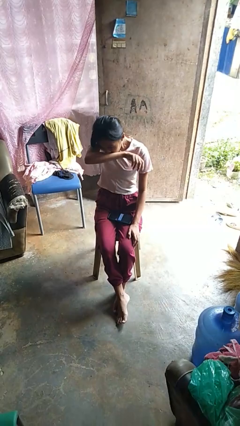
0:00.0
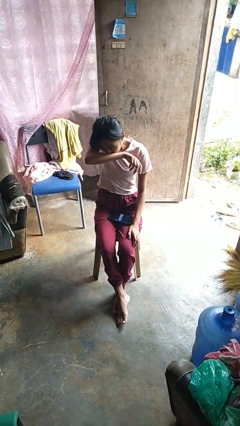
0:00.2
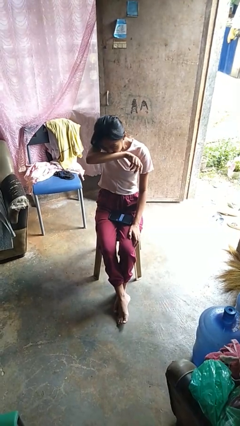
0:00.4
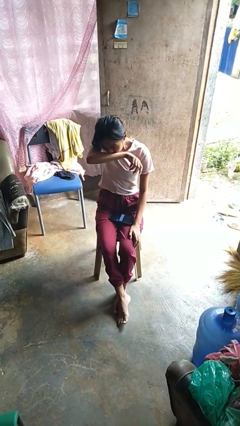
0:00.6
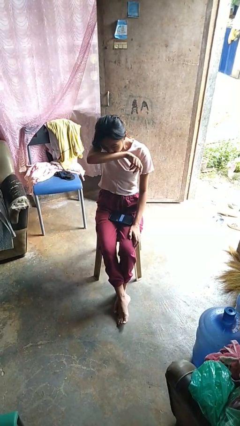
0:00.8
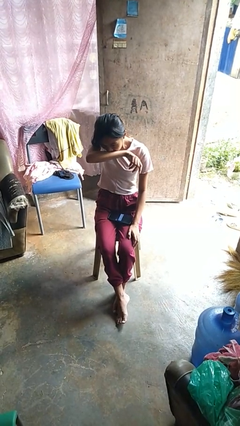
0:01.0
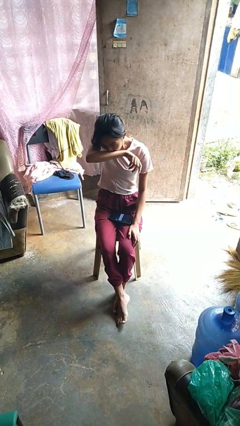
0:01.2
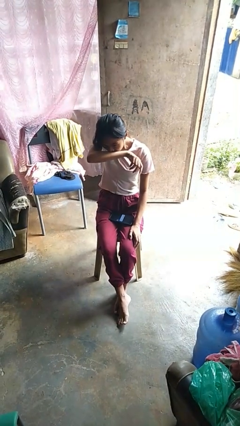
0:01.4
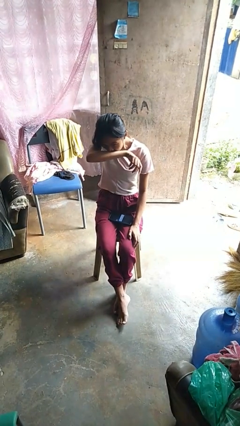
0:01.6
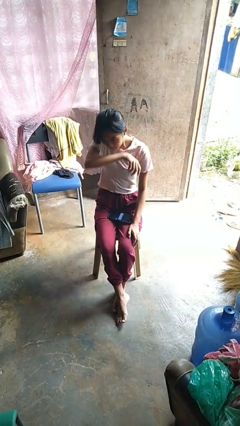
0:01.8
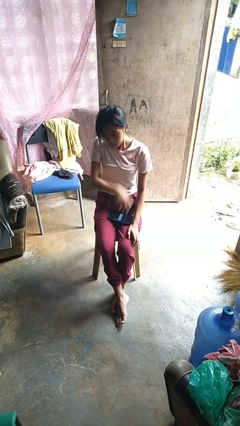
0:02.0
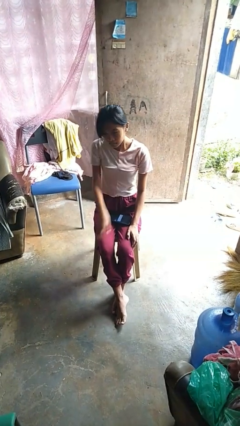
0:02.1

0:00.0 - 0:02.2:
person sneezes into arm

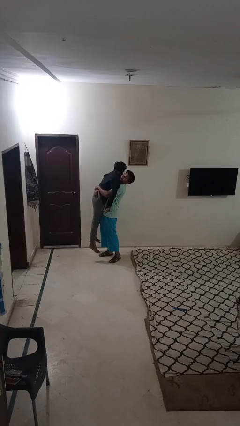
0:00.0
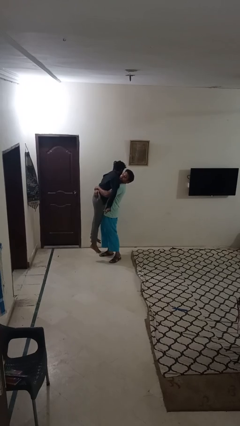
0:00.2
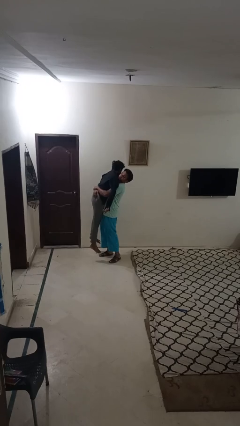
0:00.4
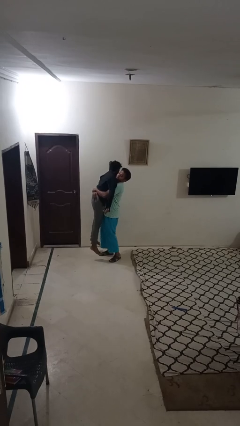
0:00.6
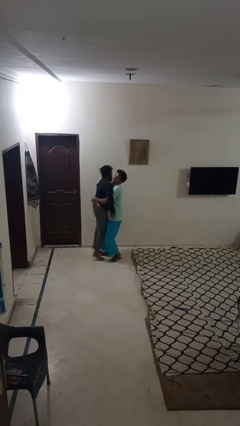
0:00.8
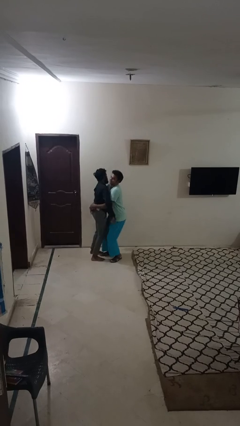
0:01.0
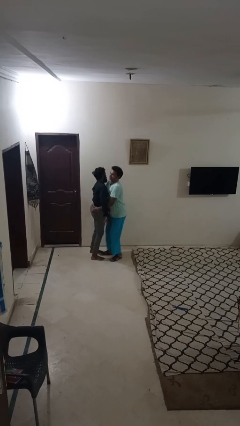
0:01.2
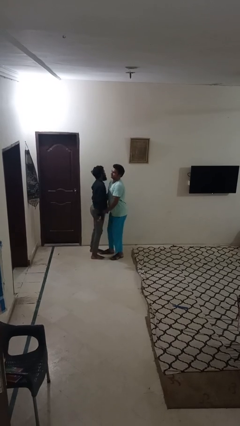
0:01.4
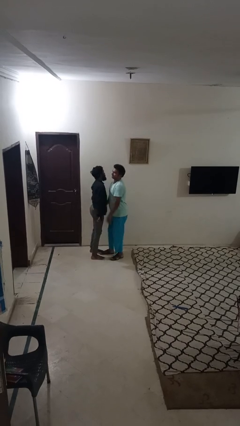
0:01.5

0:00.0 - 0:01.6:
person puts down person

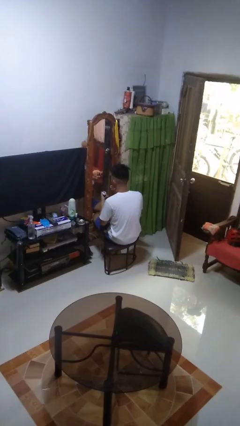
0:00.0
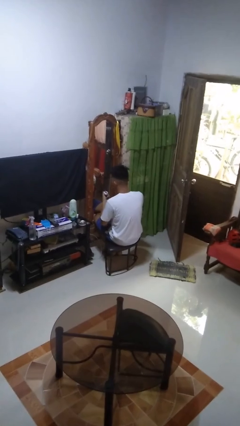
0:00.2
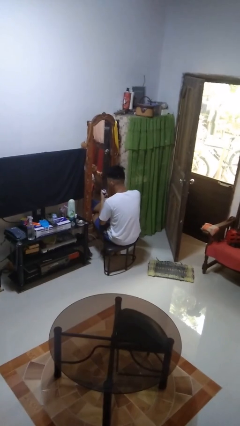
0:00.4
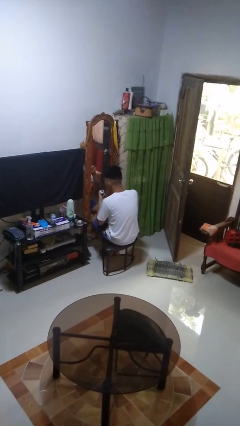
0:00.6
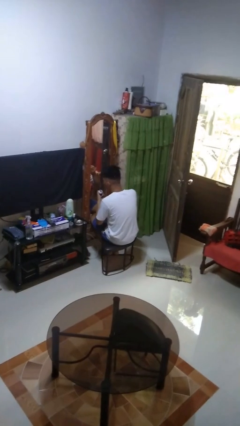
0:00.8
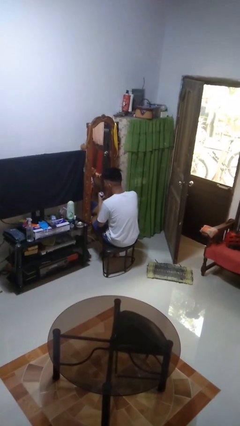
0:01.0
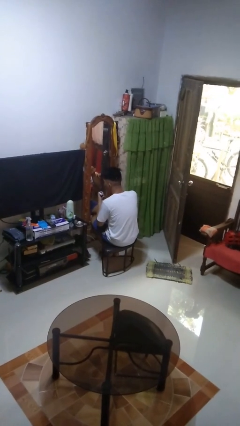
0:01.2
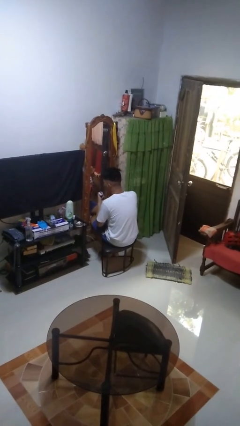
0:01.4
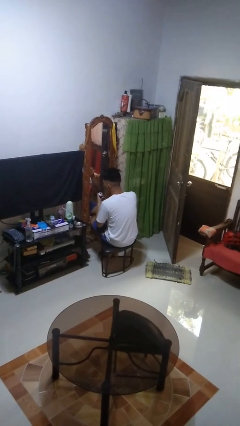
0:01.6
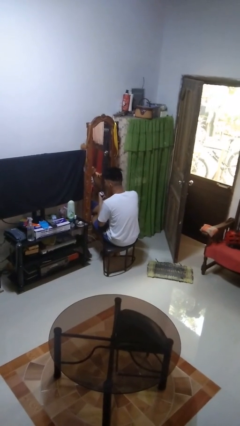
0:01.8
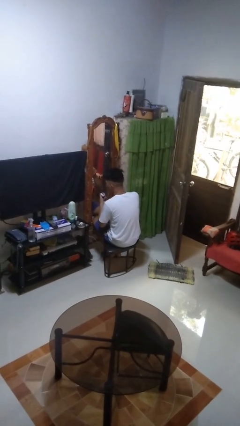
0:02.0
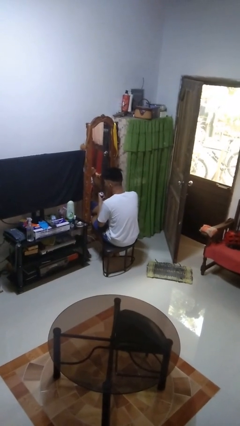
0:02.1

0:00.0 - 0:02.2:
person applies eye makeup

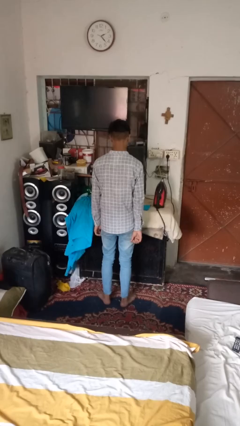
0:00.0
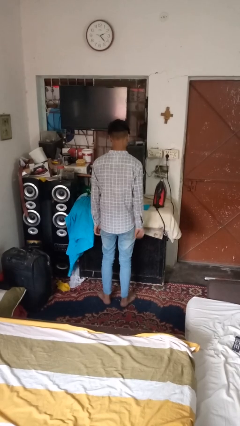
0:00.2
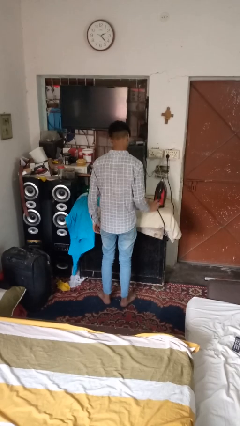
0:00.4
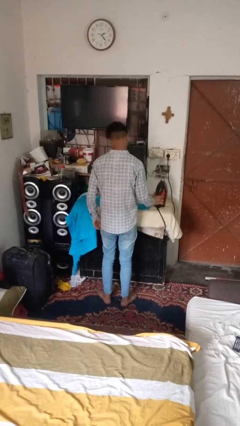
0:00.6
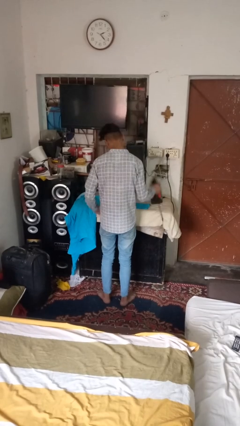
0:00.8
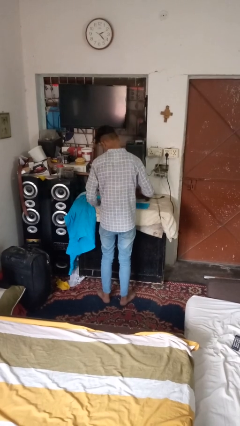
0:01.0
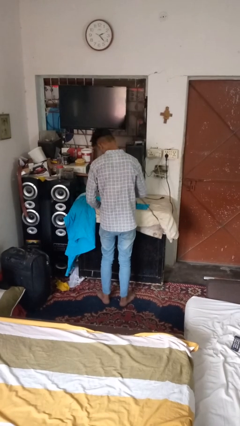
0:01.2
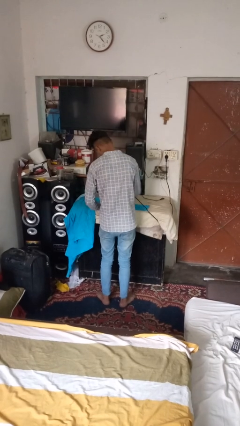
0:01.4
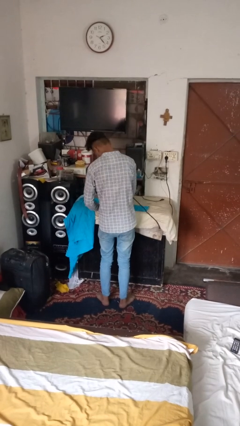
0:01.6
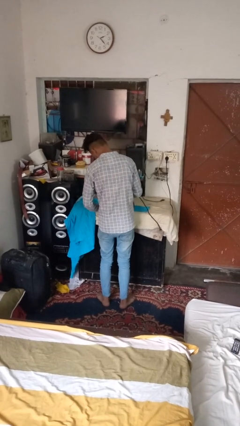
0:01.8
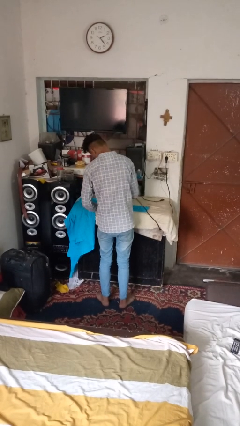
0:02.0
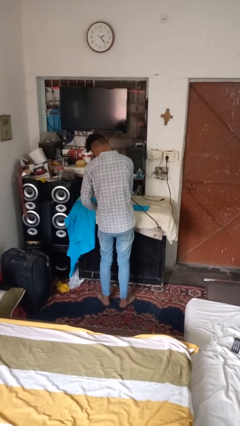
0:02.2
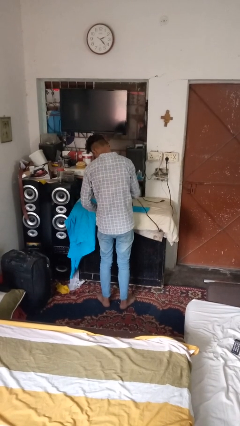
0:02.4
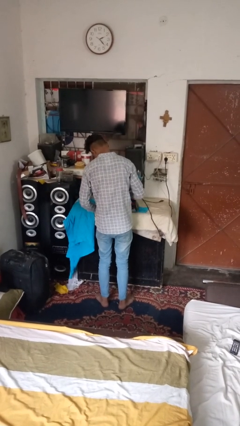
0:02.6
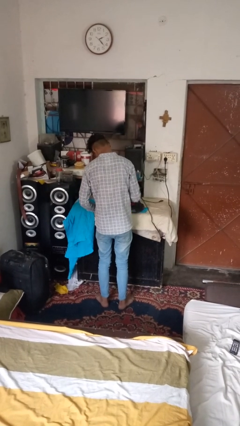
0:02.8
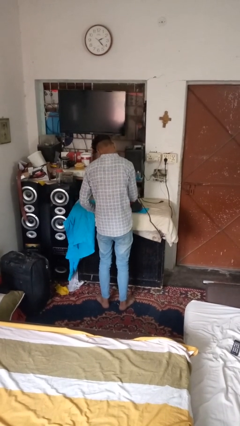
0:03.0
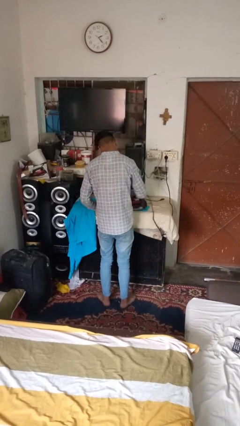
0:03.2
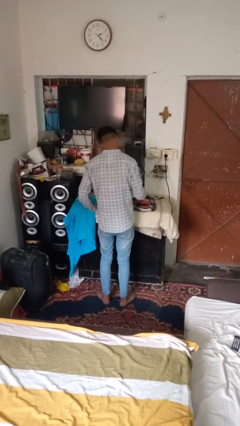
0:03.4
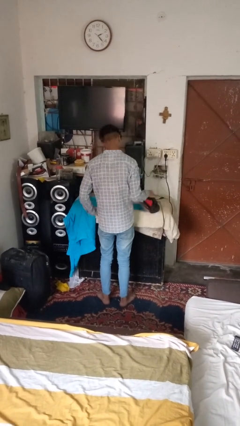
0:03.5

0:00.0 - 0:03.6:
person irons clothes

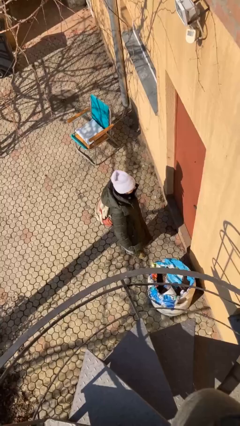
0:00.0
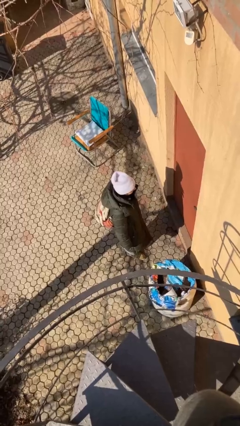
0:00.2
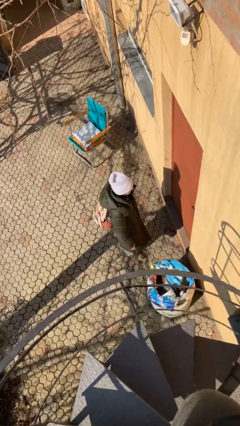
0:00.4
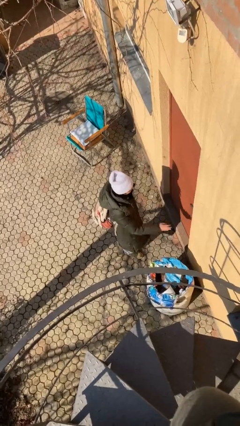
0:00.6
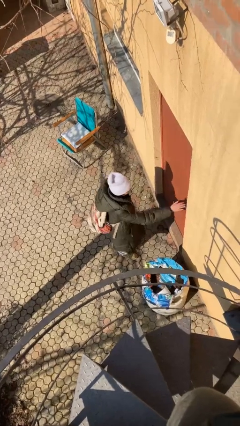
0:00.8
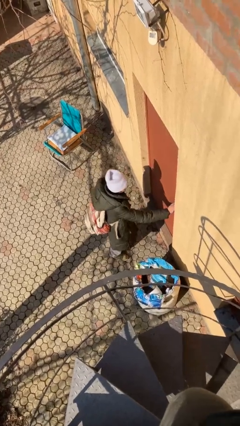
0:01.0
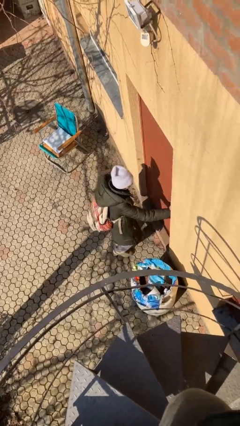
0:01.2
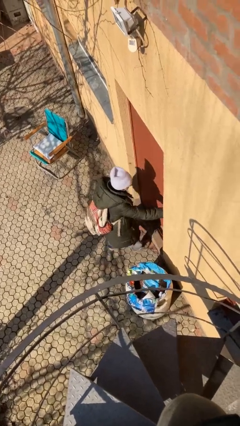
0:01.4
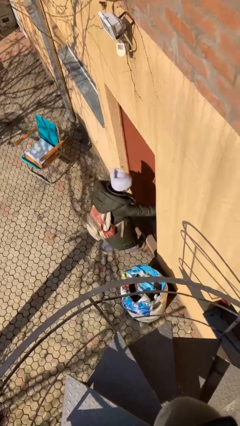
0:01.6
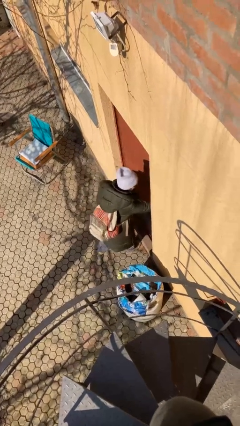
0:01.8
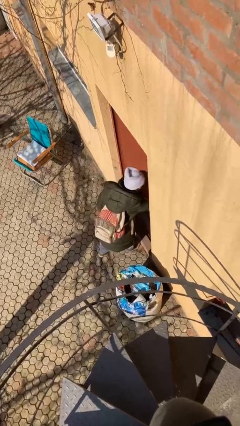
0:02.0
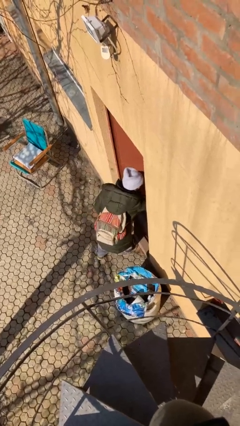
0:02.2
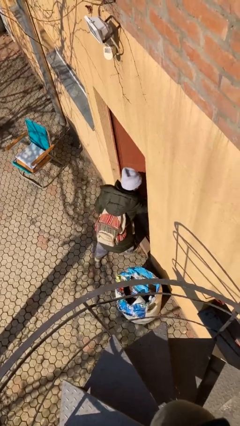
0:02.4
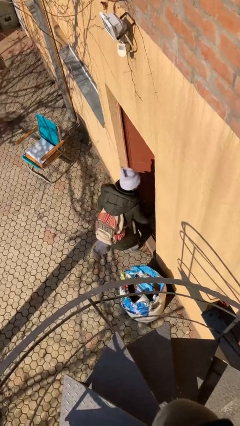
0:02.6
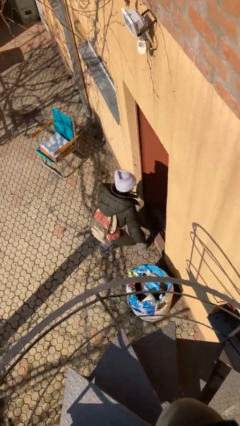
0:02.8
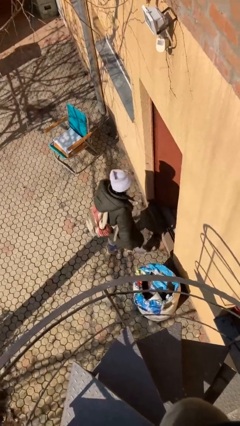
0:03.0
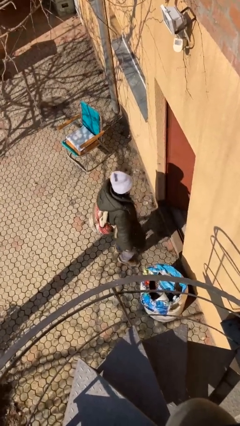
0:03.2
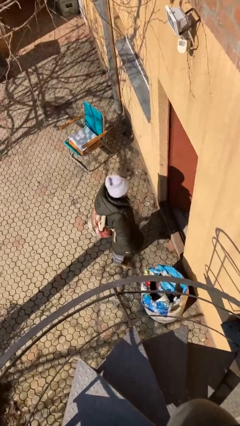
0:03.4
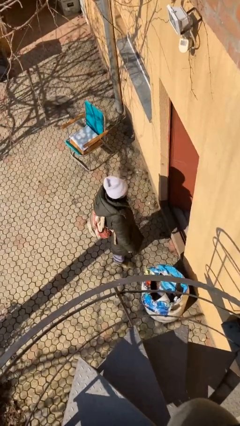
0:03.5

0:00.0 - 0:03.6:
person opens facility door

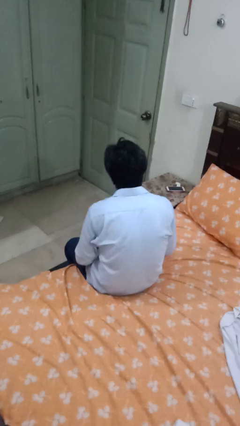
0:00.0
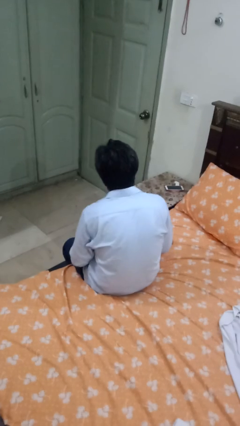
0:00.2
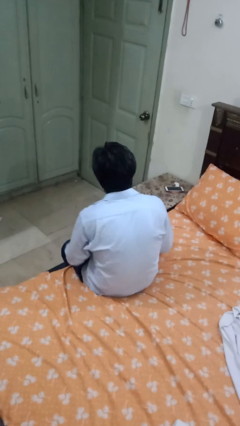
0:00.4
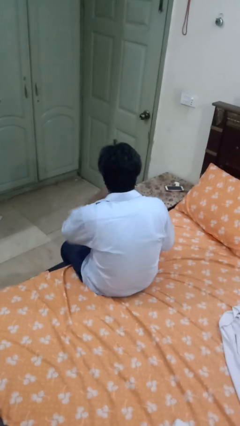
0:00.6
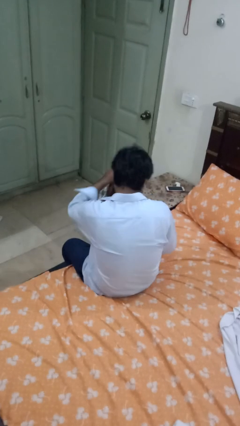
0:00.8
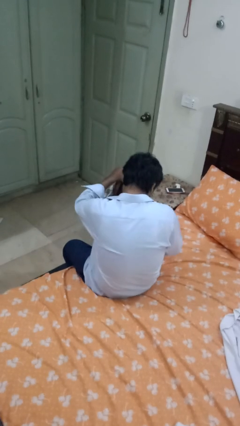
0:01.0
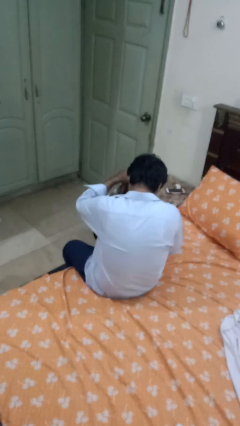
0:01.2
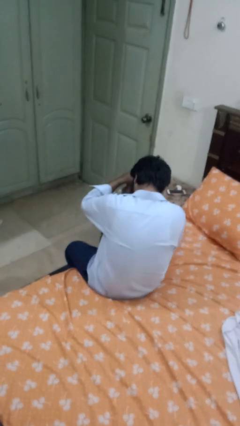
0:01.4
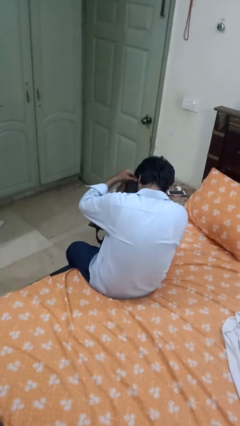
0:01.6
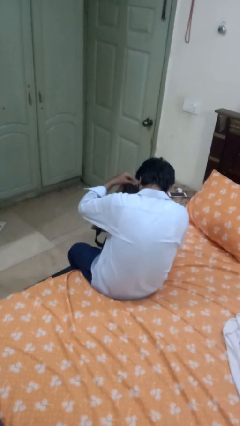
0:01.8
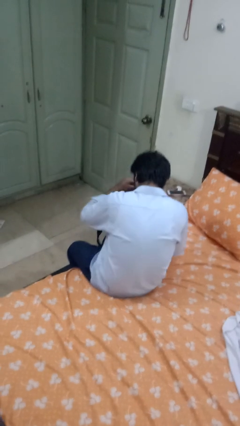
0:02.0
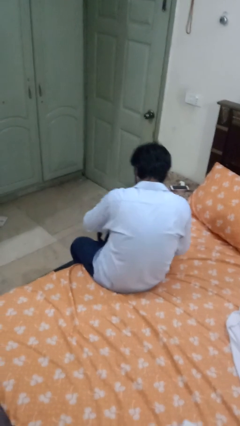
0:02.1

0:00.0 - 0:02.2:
person searches in bag

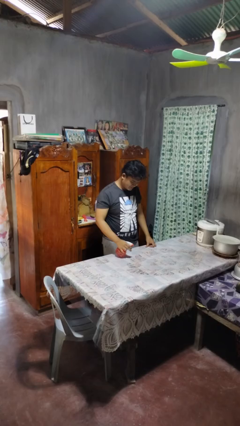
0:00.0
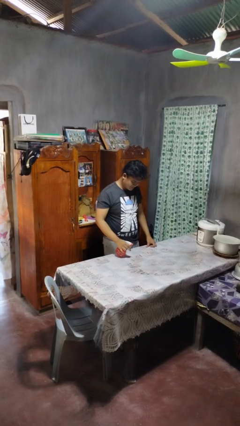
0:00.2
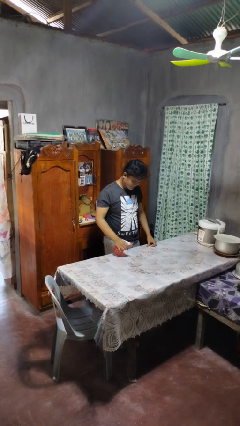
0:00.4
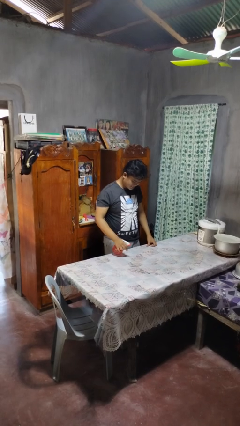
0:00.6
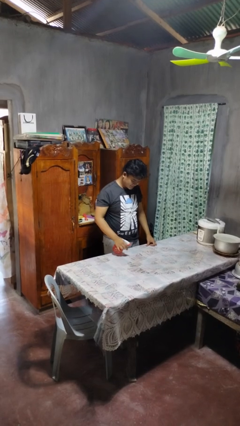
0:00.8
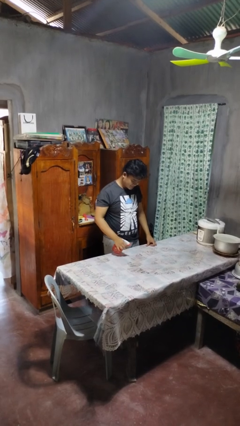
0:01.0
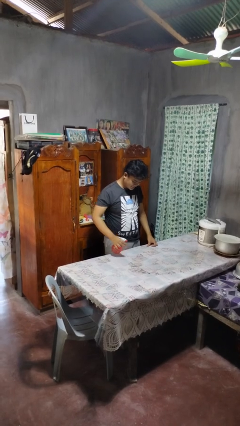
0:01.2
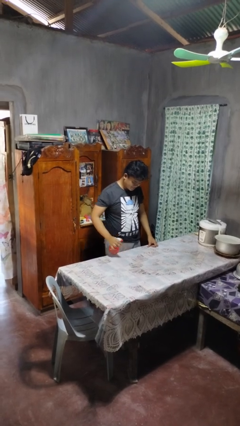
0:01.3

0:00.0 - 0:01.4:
person sprays from bottle

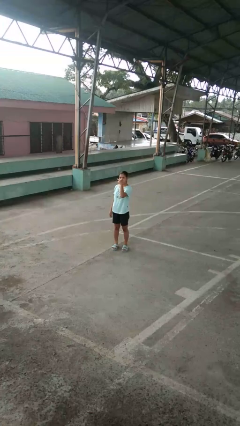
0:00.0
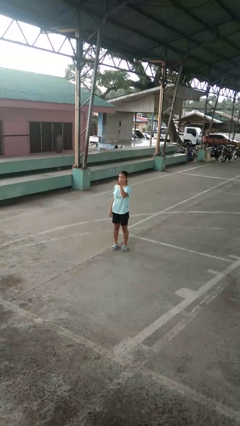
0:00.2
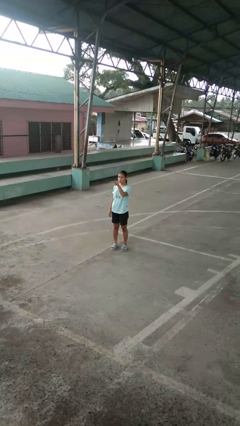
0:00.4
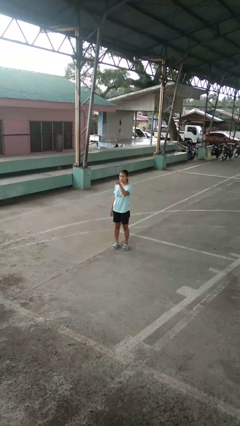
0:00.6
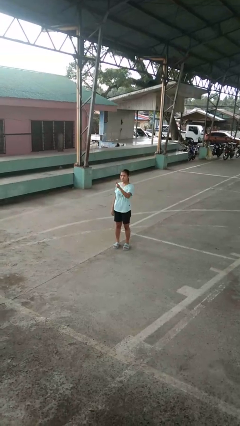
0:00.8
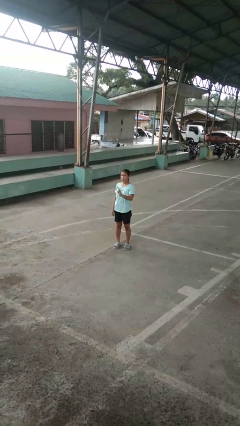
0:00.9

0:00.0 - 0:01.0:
person gestures watch closely
